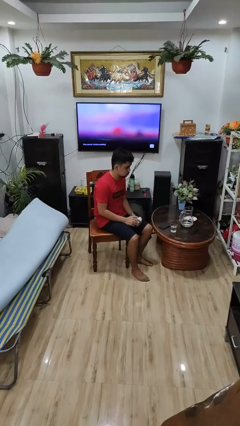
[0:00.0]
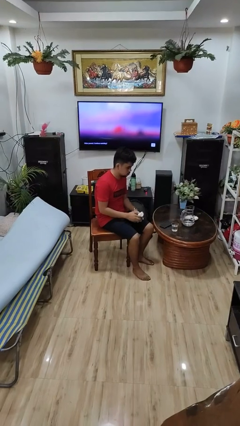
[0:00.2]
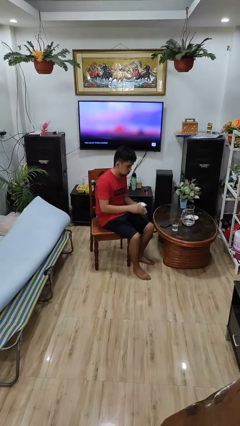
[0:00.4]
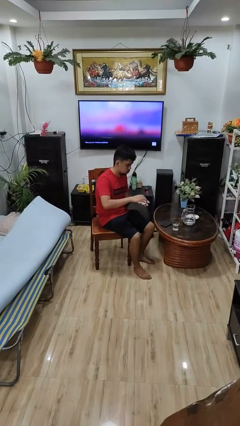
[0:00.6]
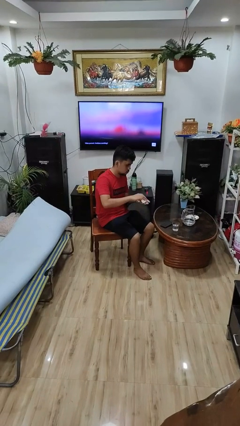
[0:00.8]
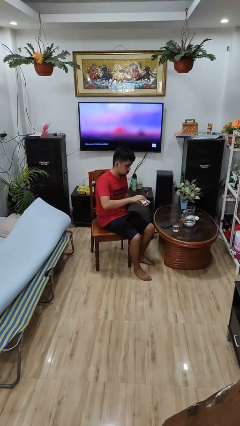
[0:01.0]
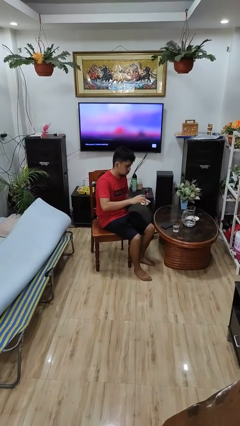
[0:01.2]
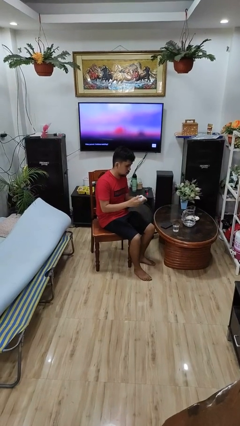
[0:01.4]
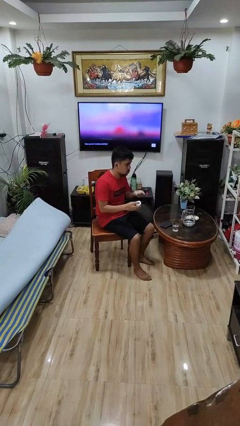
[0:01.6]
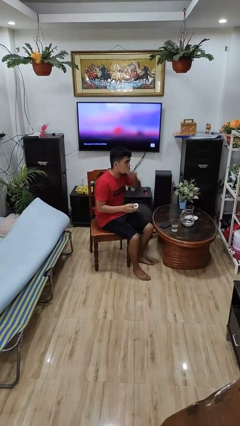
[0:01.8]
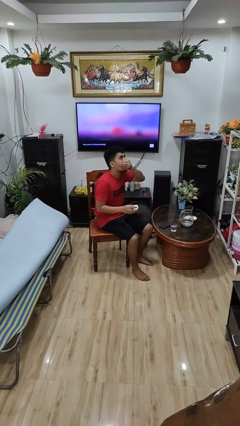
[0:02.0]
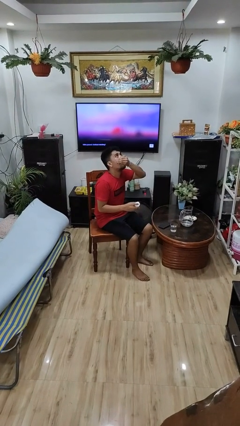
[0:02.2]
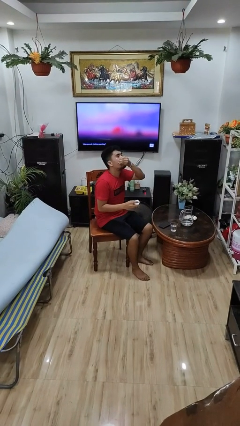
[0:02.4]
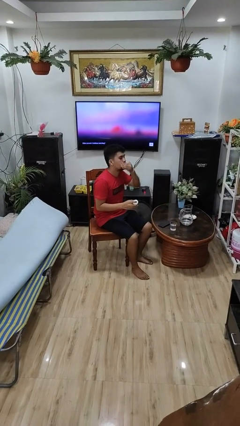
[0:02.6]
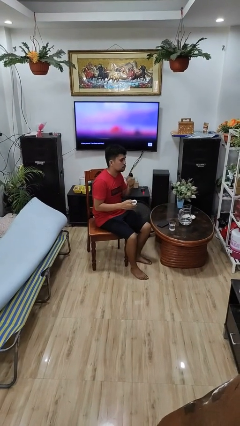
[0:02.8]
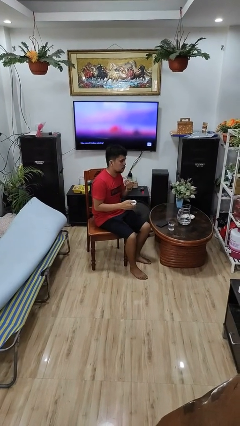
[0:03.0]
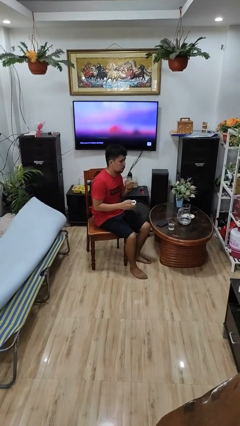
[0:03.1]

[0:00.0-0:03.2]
person takes medicine pills

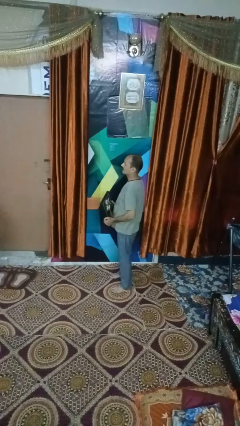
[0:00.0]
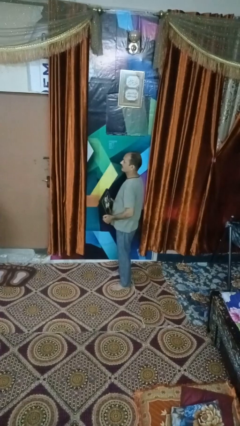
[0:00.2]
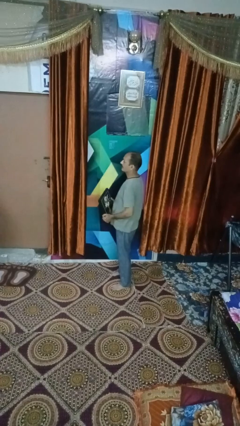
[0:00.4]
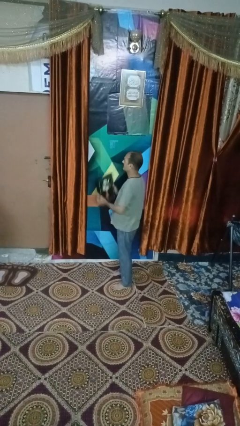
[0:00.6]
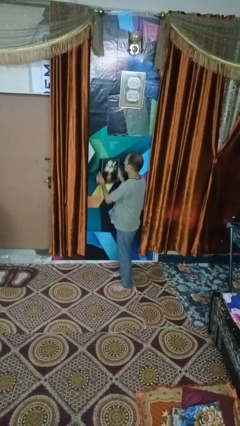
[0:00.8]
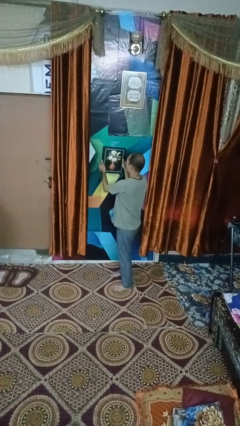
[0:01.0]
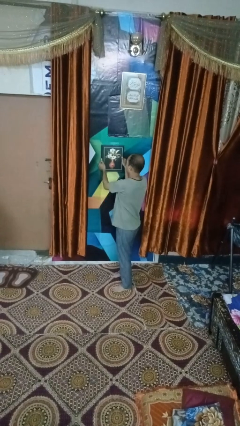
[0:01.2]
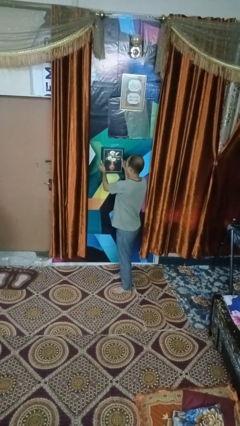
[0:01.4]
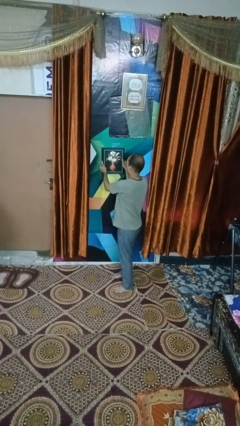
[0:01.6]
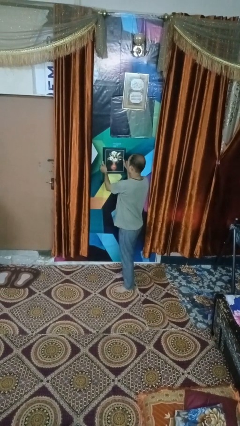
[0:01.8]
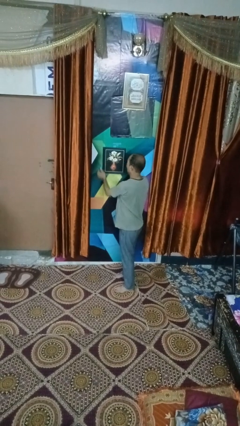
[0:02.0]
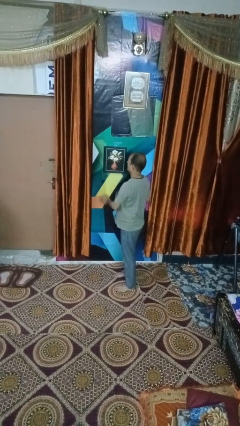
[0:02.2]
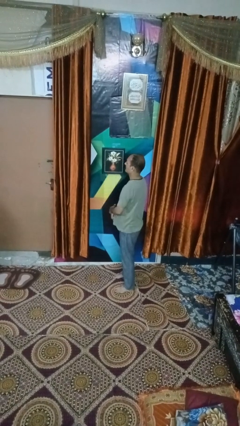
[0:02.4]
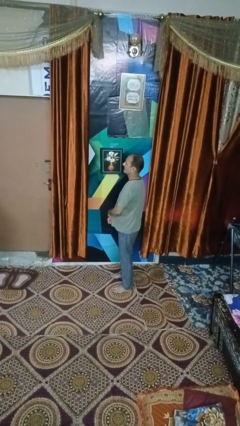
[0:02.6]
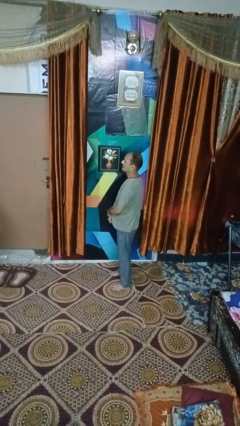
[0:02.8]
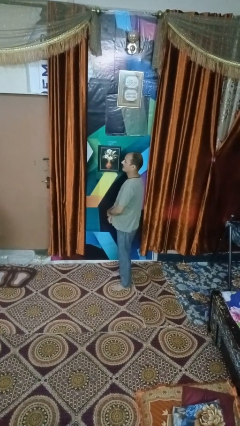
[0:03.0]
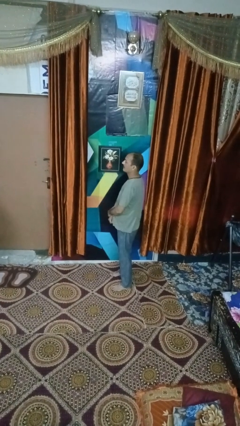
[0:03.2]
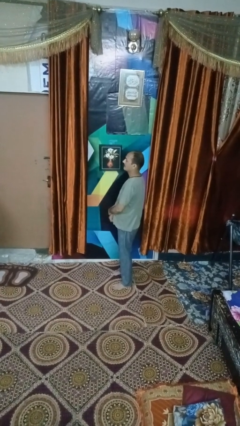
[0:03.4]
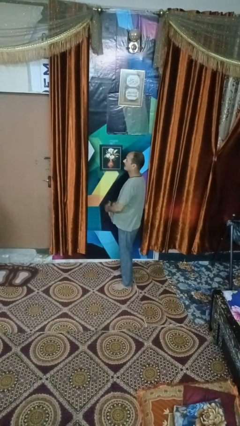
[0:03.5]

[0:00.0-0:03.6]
person puts up picture frame

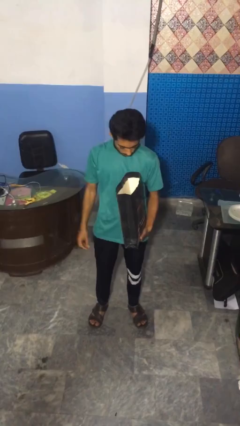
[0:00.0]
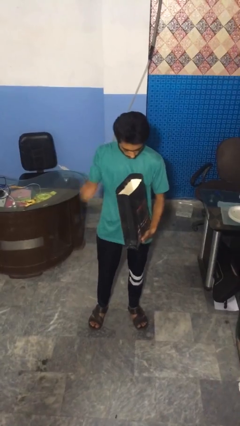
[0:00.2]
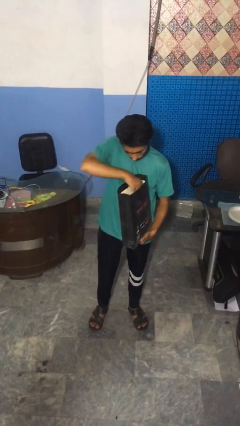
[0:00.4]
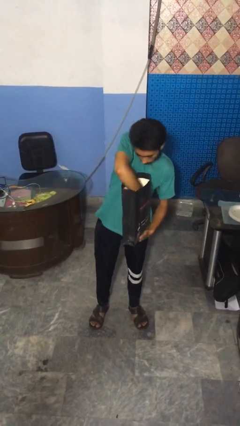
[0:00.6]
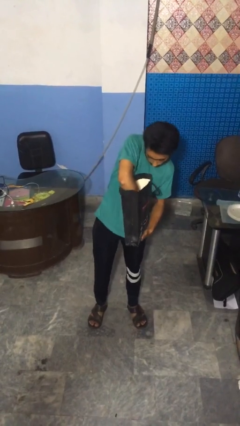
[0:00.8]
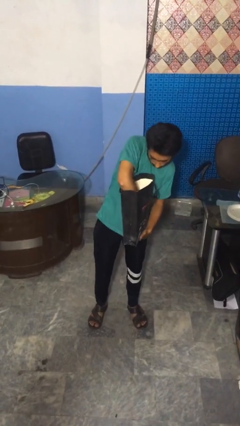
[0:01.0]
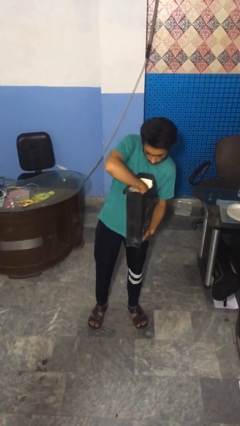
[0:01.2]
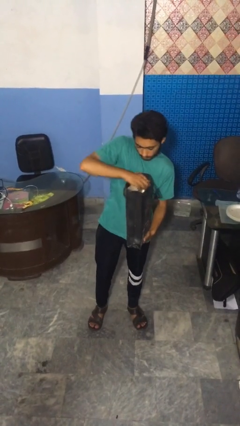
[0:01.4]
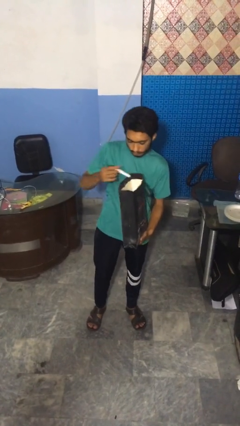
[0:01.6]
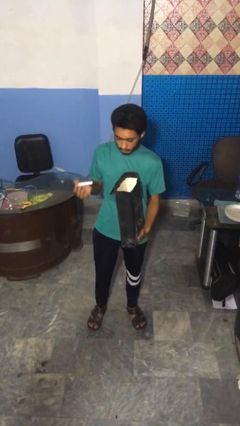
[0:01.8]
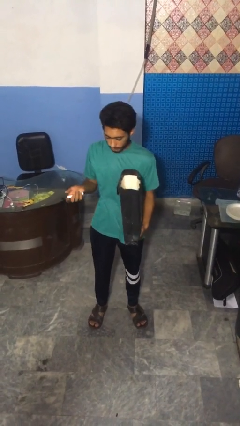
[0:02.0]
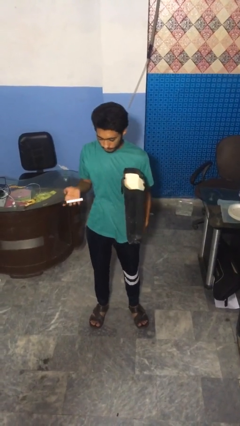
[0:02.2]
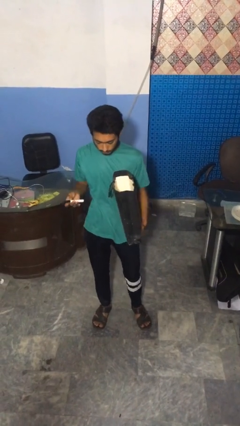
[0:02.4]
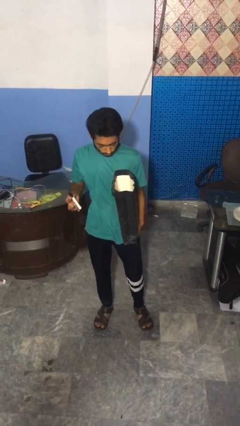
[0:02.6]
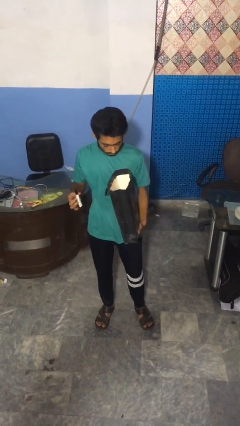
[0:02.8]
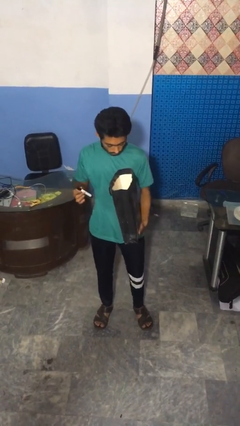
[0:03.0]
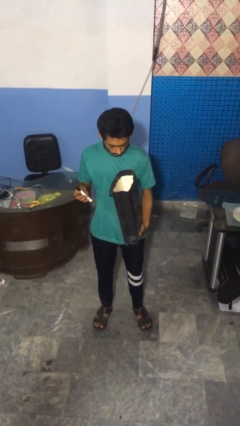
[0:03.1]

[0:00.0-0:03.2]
person takes object from bag

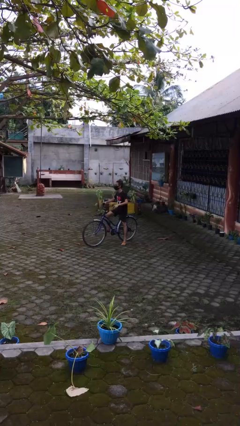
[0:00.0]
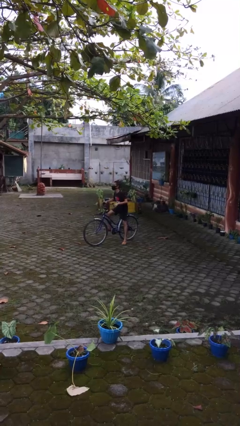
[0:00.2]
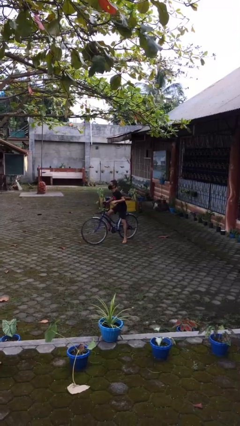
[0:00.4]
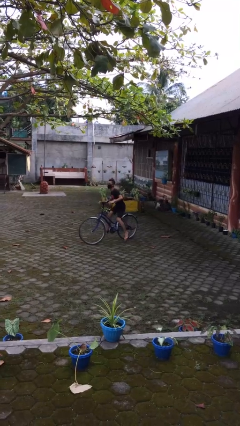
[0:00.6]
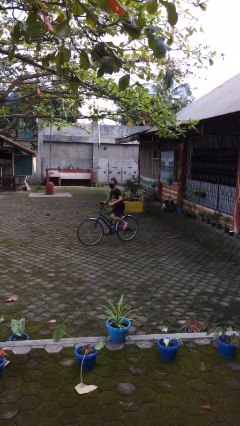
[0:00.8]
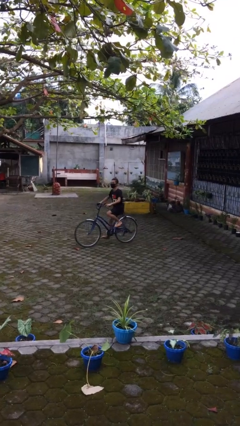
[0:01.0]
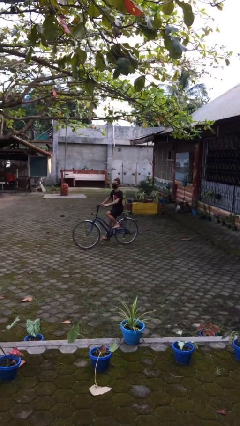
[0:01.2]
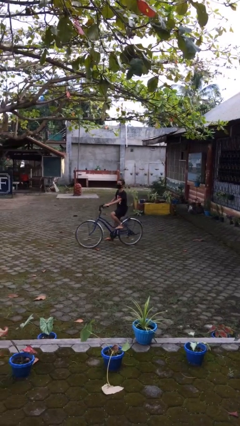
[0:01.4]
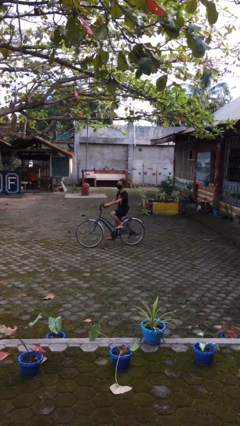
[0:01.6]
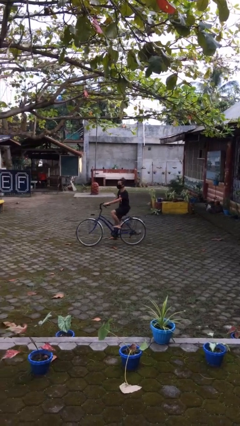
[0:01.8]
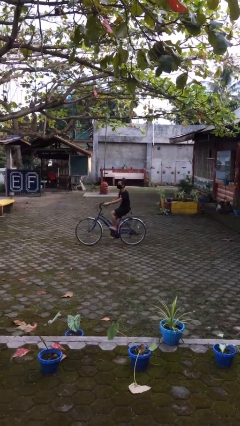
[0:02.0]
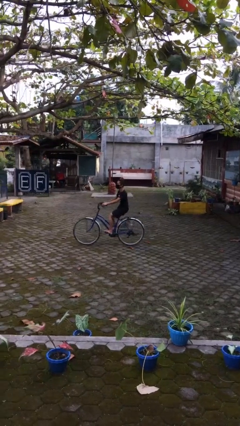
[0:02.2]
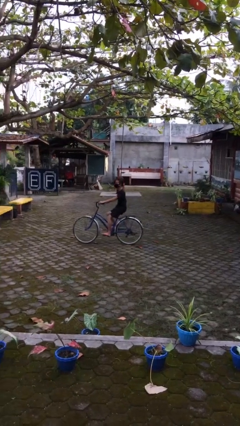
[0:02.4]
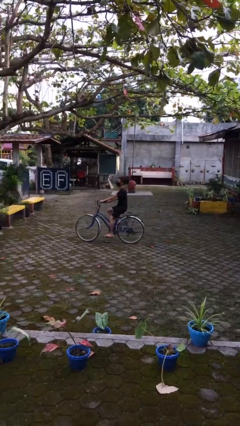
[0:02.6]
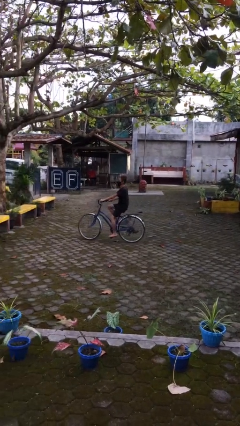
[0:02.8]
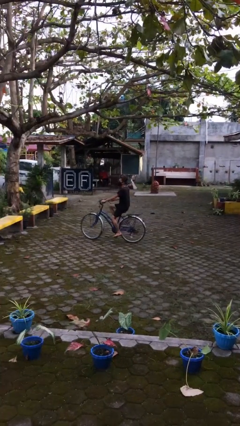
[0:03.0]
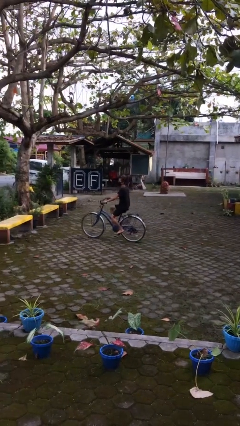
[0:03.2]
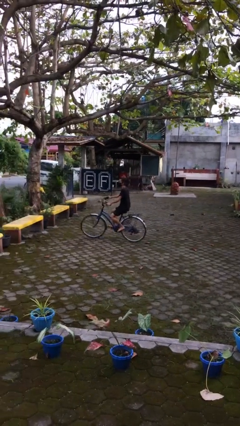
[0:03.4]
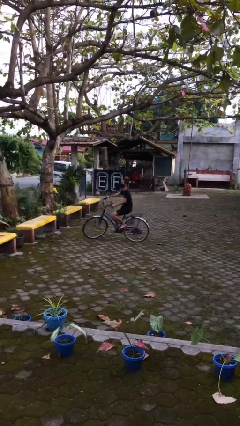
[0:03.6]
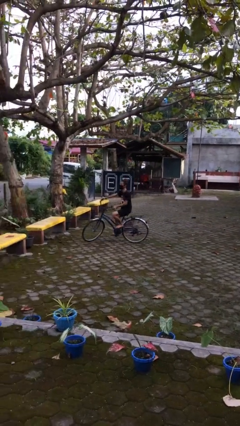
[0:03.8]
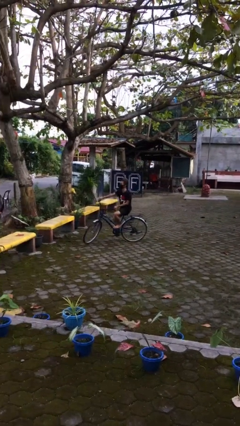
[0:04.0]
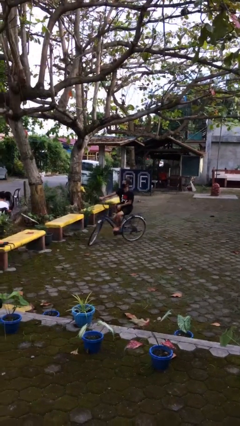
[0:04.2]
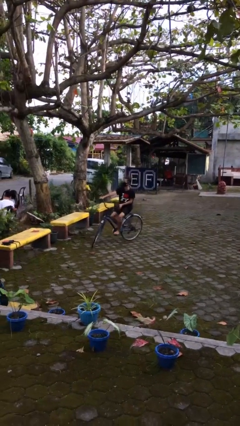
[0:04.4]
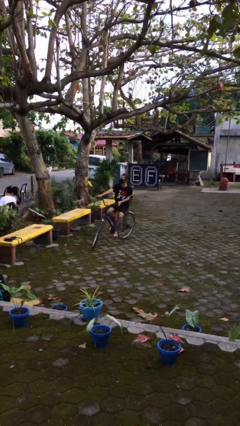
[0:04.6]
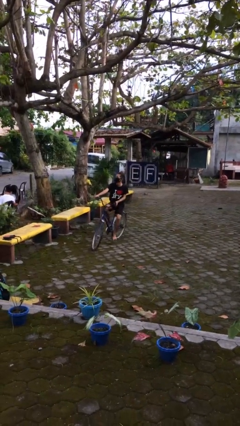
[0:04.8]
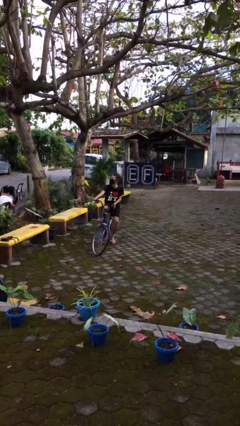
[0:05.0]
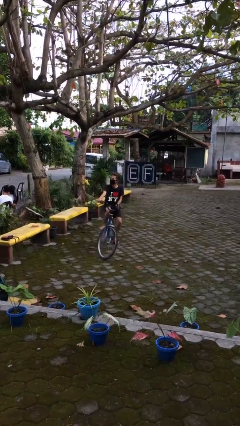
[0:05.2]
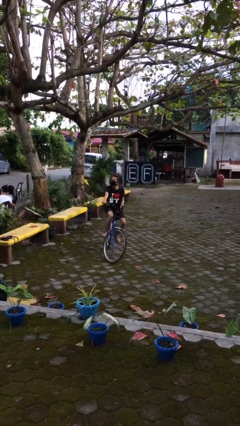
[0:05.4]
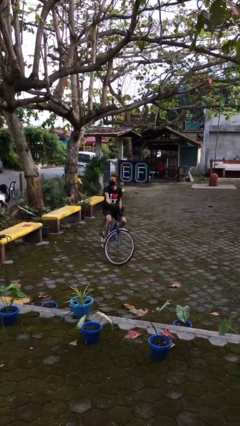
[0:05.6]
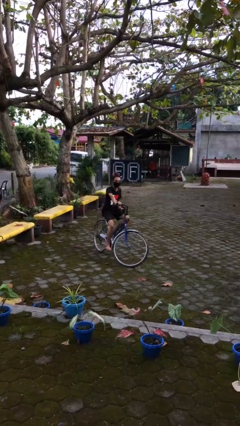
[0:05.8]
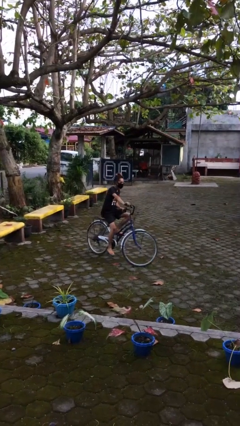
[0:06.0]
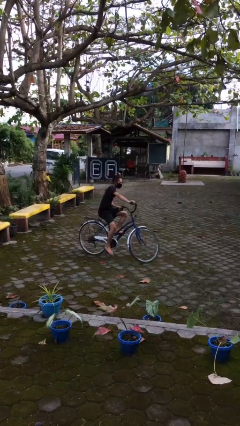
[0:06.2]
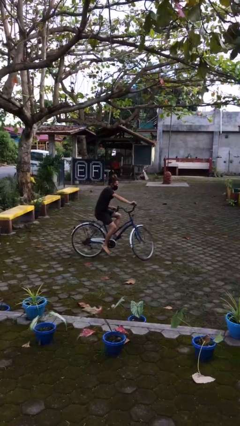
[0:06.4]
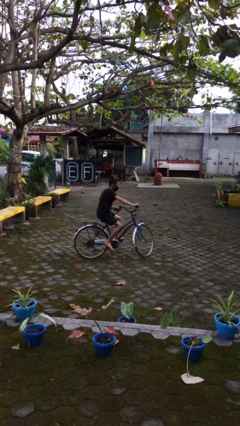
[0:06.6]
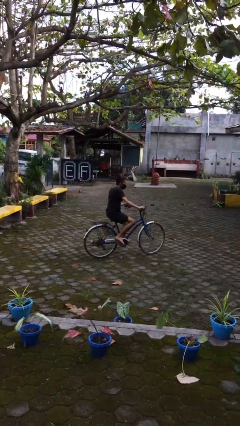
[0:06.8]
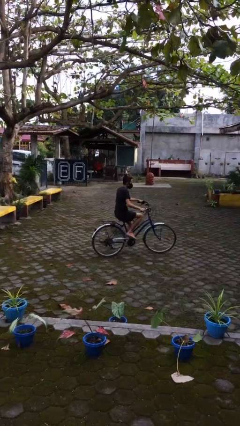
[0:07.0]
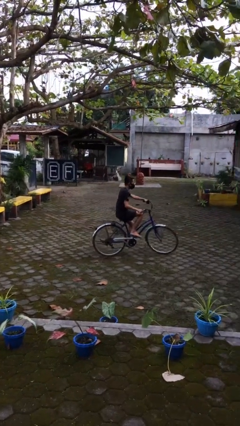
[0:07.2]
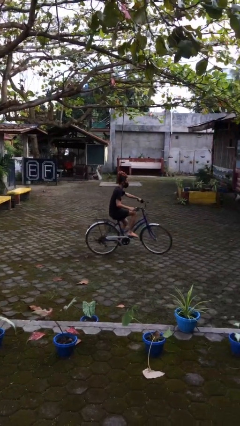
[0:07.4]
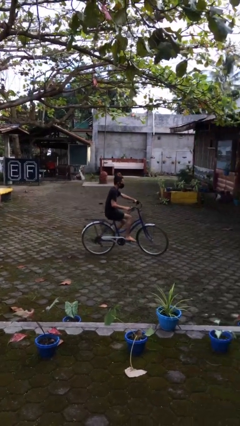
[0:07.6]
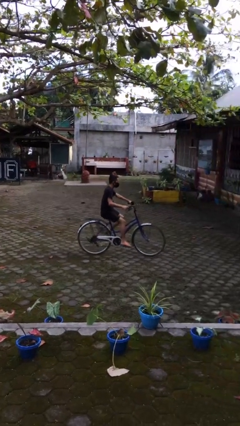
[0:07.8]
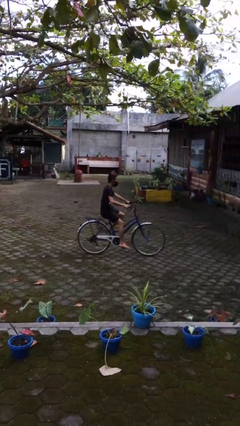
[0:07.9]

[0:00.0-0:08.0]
person rides bicycle
